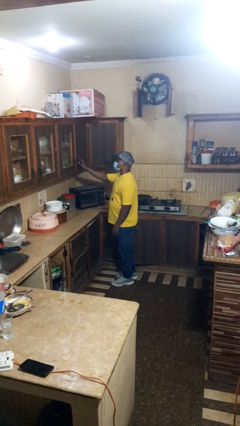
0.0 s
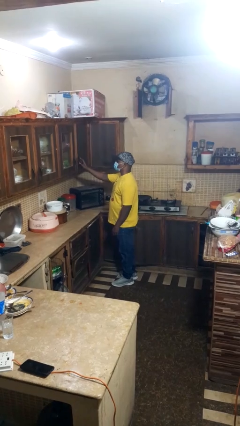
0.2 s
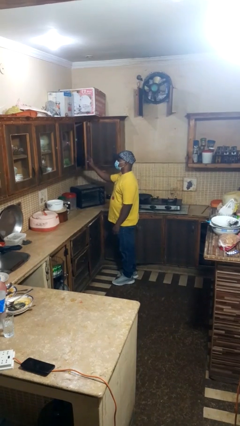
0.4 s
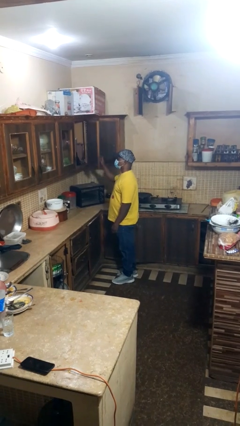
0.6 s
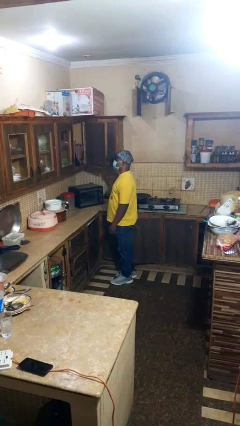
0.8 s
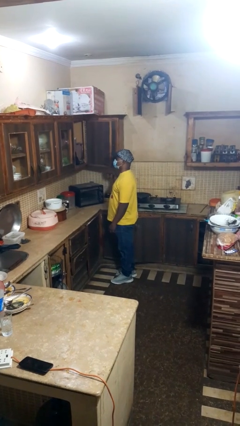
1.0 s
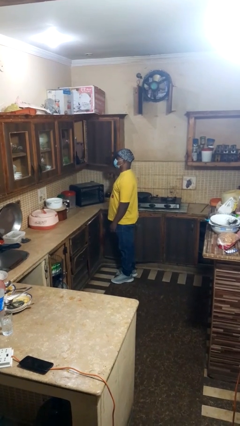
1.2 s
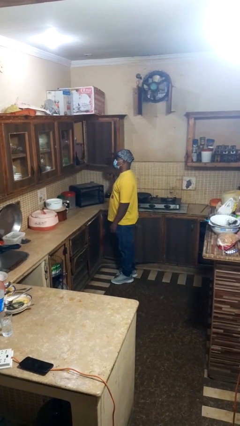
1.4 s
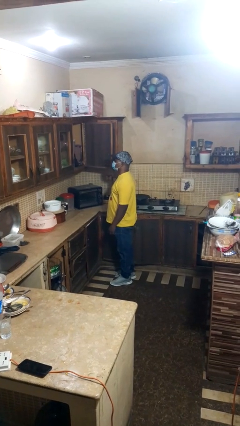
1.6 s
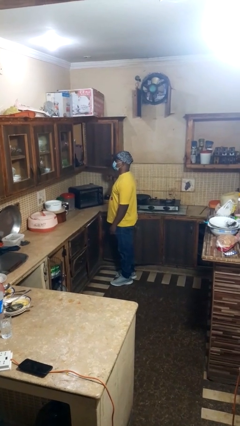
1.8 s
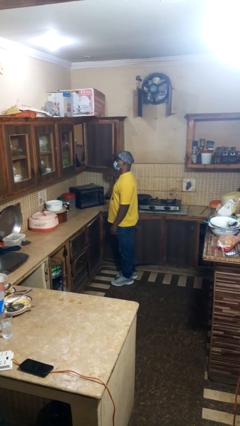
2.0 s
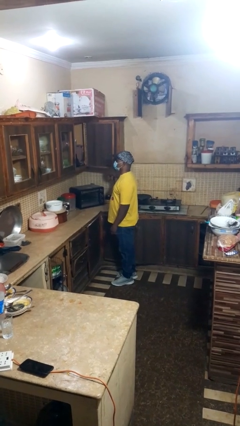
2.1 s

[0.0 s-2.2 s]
person opens cabinet

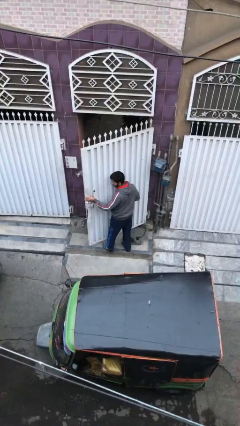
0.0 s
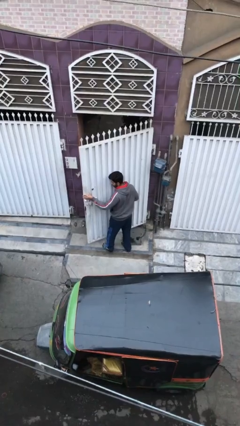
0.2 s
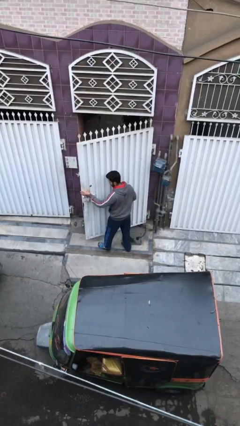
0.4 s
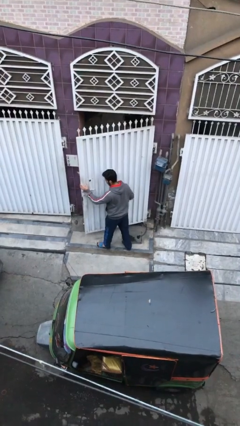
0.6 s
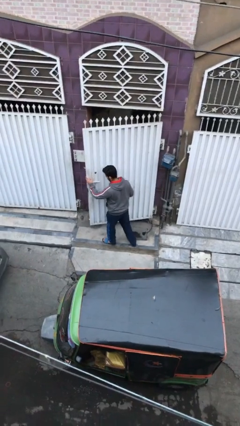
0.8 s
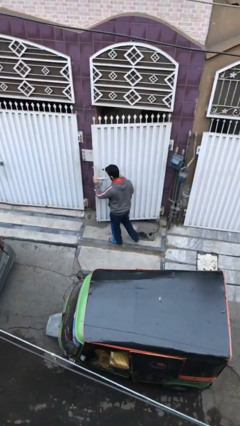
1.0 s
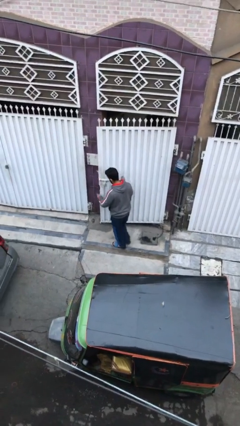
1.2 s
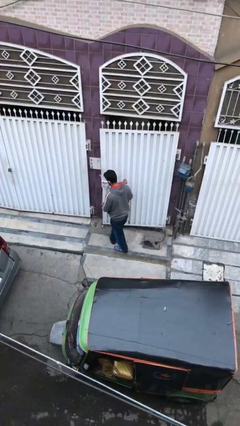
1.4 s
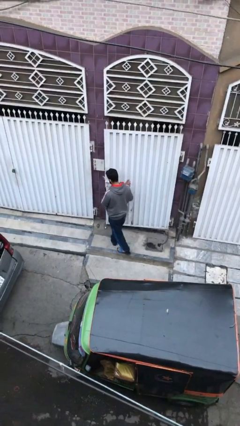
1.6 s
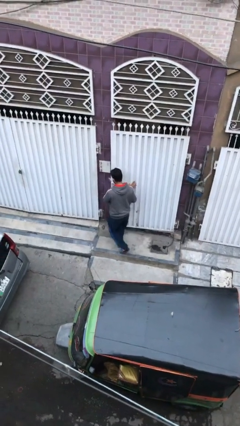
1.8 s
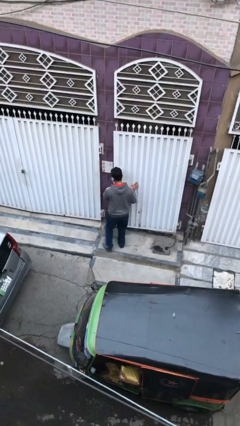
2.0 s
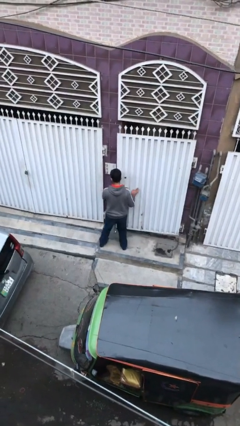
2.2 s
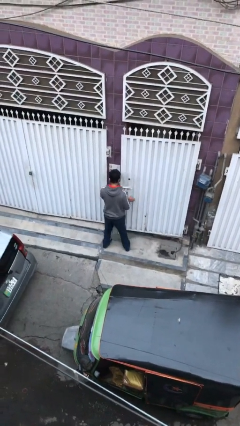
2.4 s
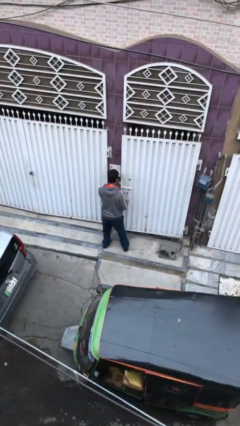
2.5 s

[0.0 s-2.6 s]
person closes facility door

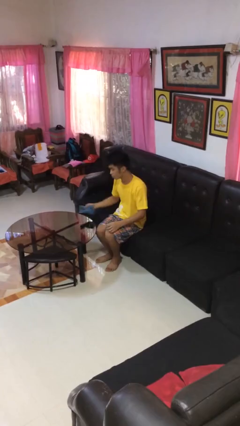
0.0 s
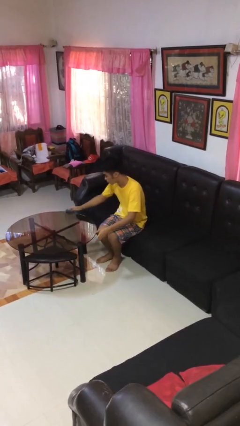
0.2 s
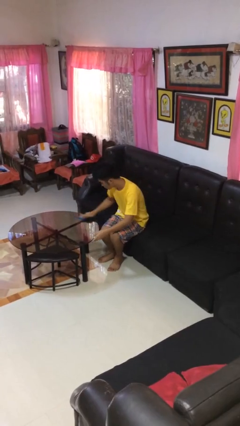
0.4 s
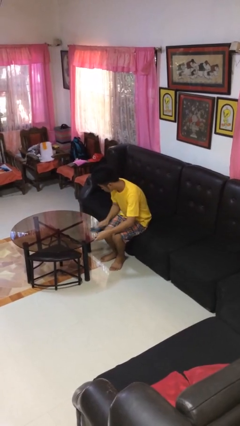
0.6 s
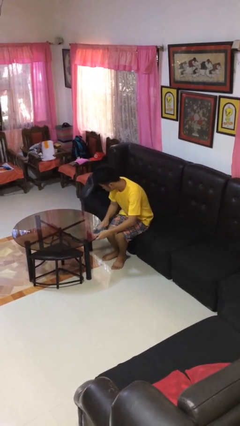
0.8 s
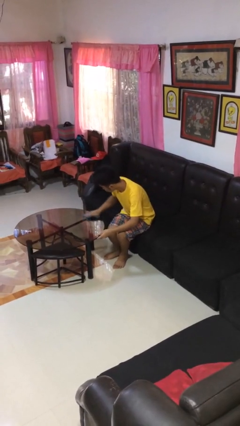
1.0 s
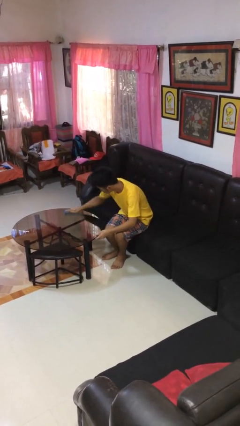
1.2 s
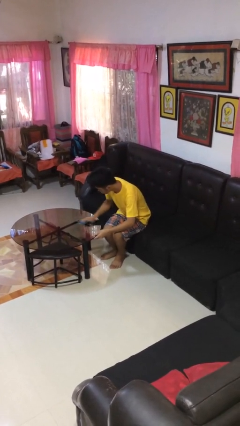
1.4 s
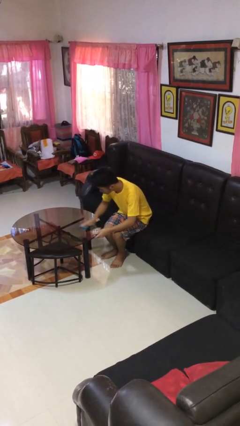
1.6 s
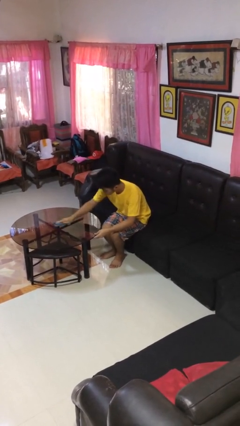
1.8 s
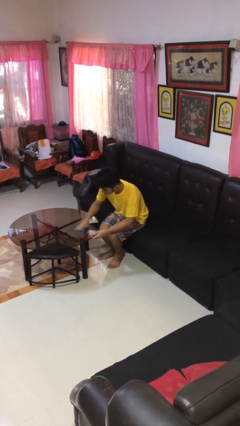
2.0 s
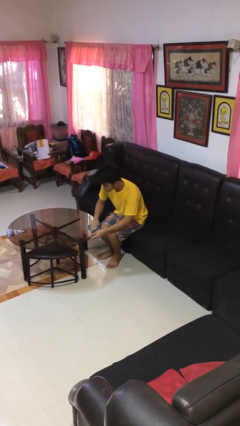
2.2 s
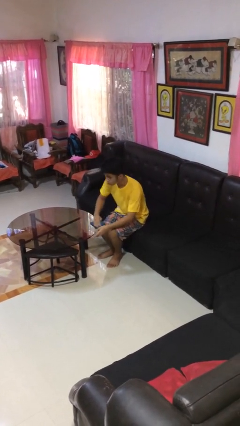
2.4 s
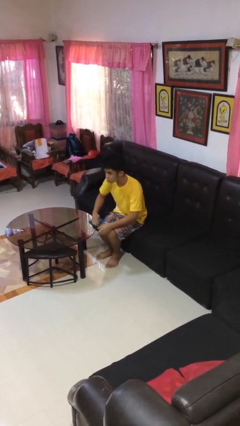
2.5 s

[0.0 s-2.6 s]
person cleans table with rag

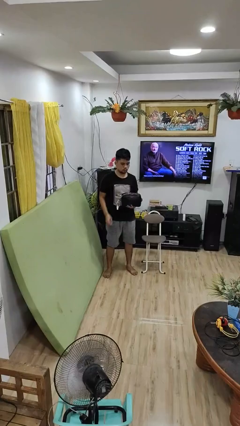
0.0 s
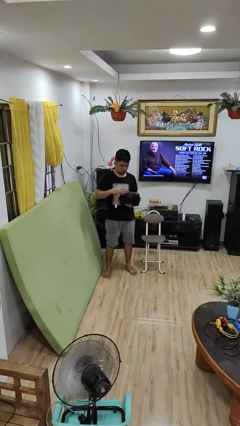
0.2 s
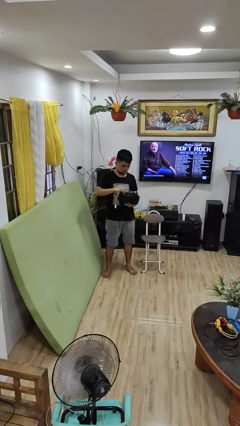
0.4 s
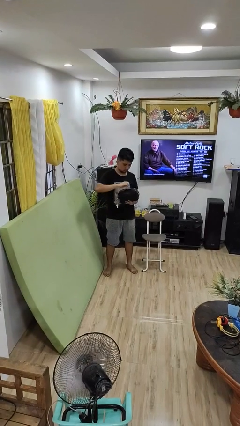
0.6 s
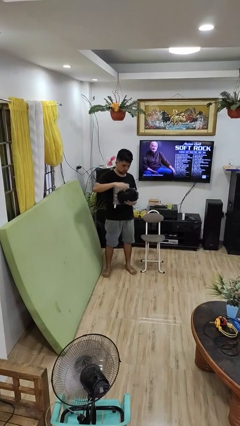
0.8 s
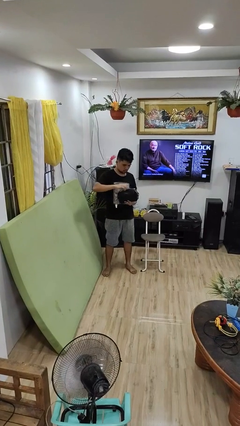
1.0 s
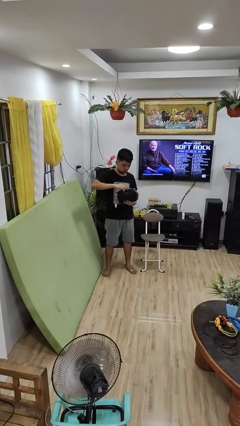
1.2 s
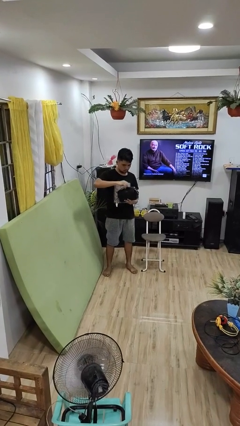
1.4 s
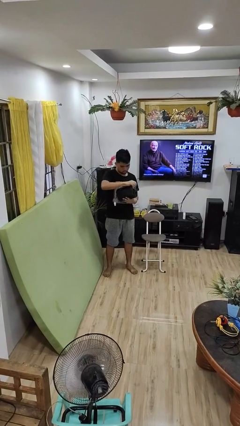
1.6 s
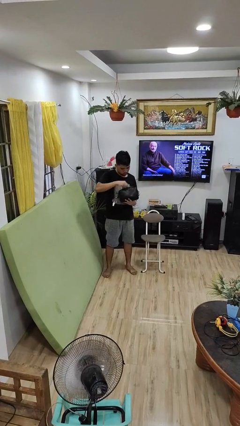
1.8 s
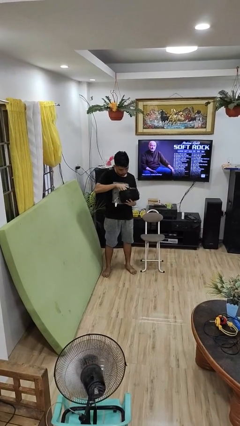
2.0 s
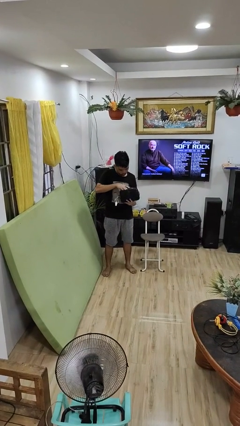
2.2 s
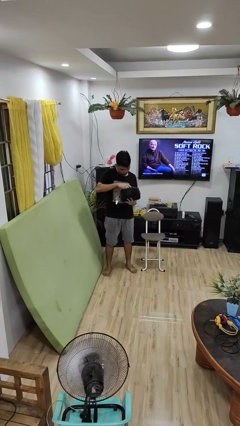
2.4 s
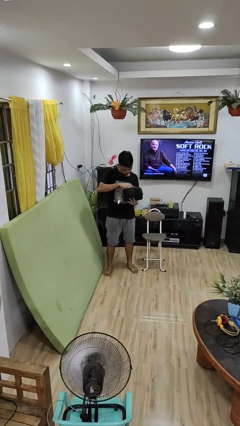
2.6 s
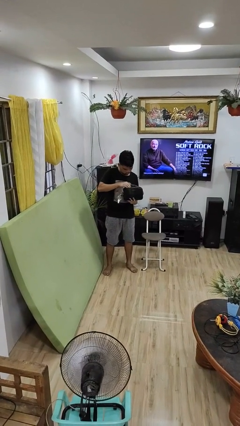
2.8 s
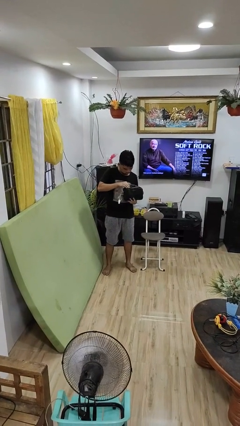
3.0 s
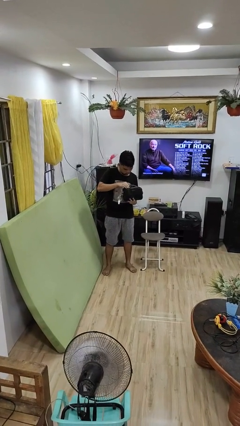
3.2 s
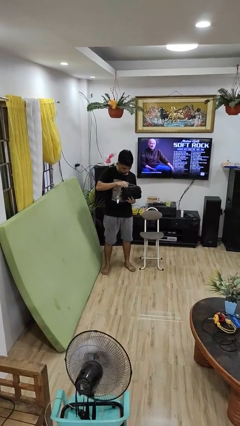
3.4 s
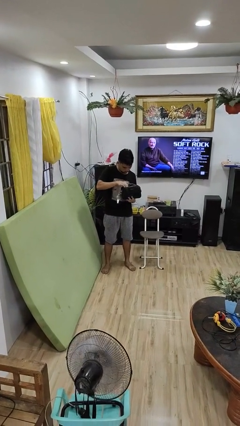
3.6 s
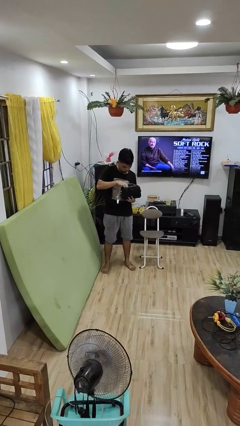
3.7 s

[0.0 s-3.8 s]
person searches in purse

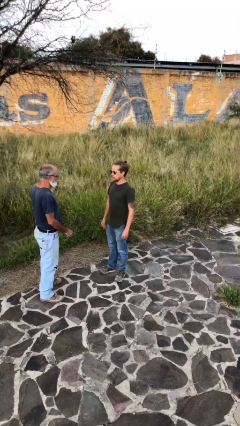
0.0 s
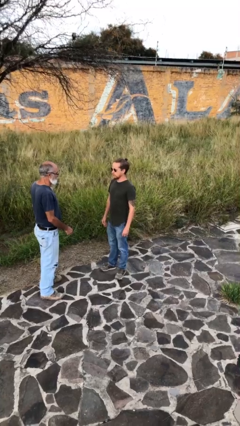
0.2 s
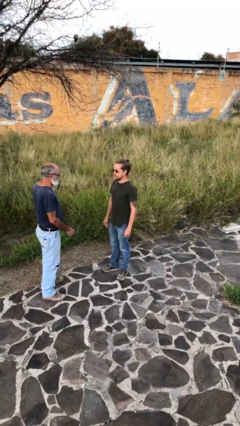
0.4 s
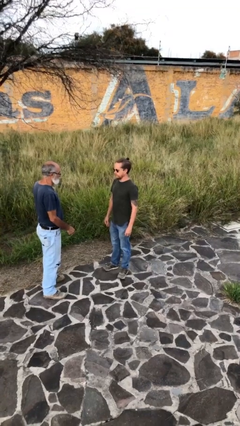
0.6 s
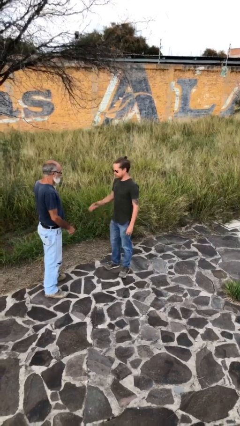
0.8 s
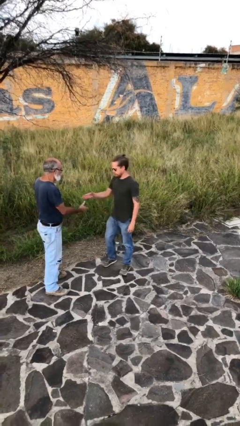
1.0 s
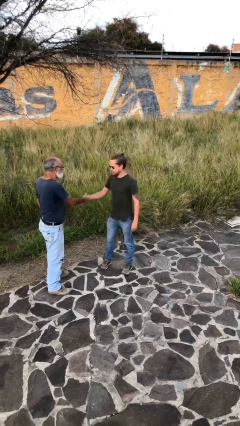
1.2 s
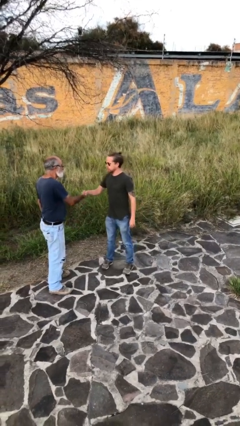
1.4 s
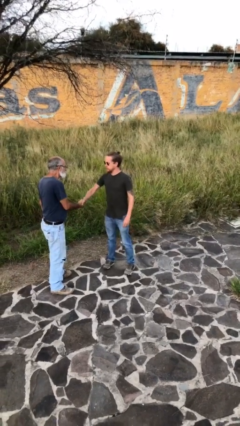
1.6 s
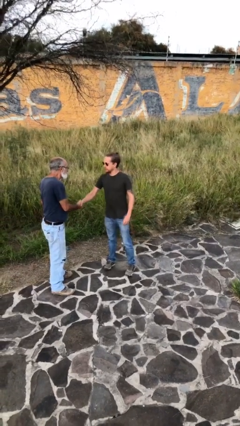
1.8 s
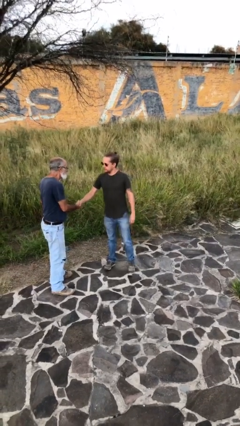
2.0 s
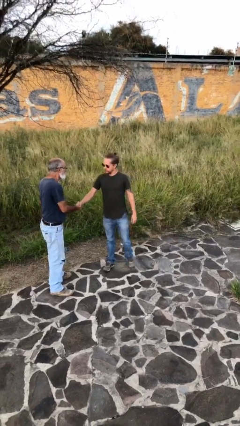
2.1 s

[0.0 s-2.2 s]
person shakes hand

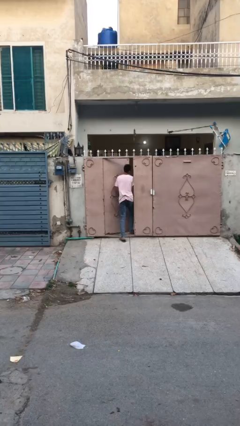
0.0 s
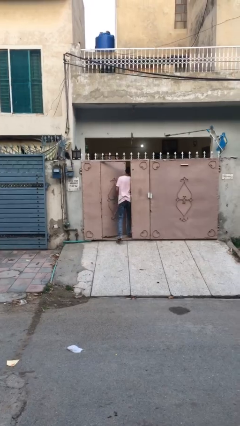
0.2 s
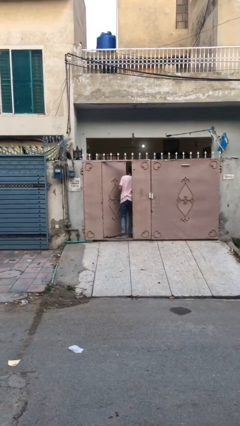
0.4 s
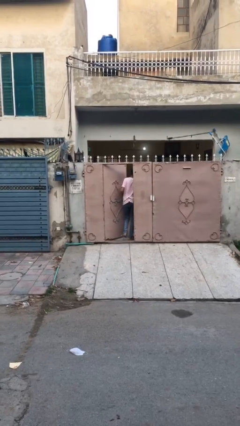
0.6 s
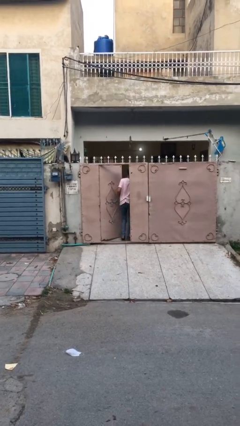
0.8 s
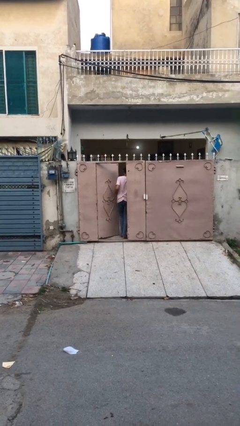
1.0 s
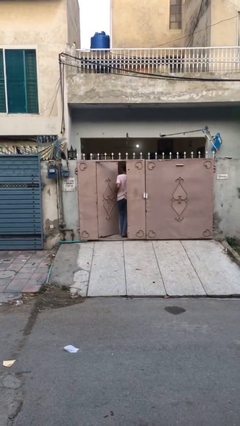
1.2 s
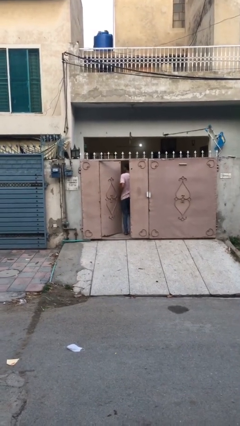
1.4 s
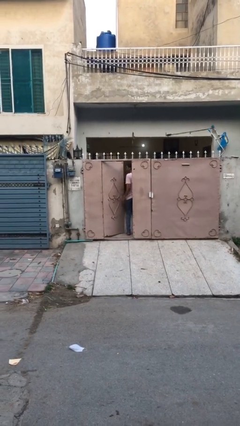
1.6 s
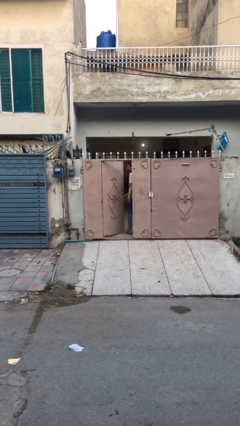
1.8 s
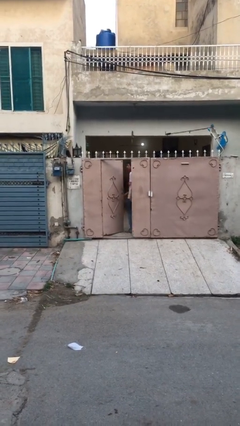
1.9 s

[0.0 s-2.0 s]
person exits scene through structure

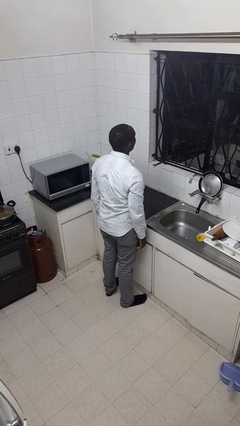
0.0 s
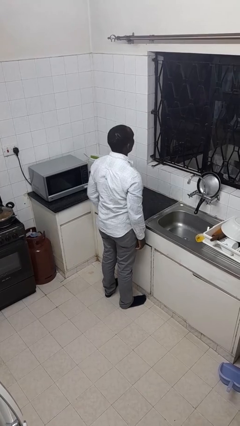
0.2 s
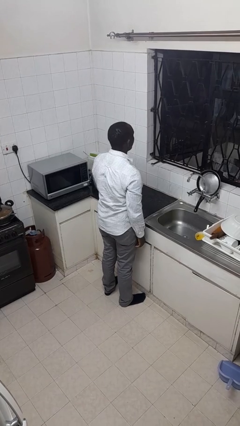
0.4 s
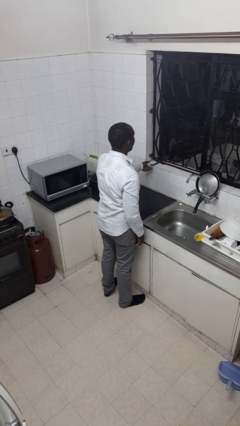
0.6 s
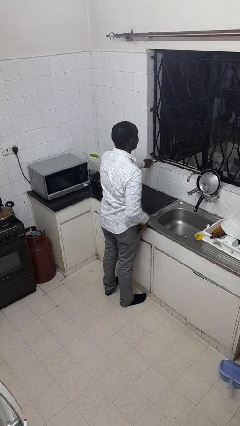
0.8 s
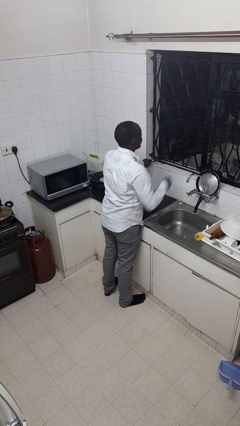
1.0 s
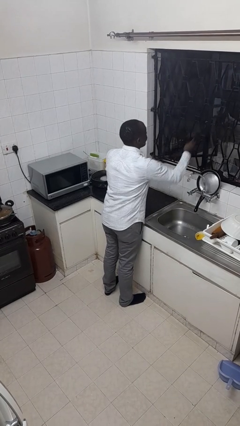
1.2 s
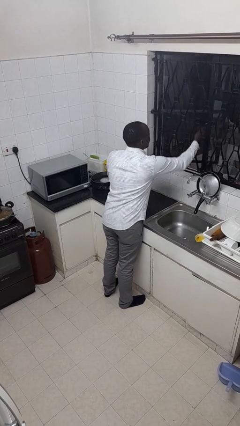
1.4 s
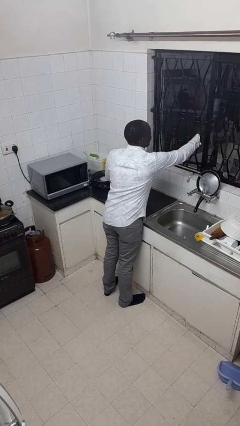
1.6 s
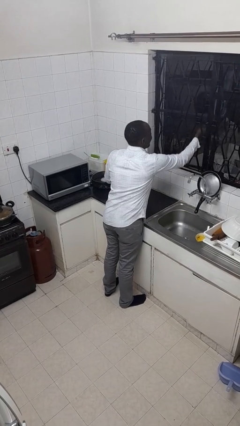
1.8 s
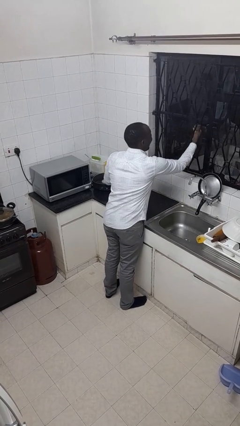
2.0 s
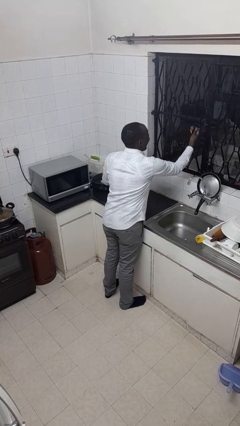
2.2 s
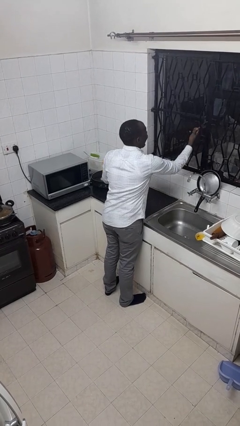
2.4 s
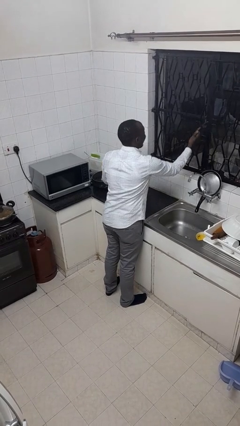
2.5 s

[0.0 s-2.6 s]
person closes home window
